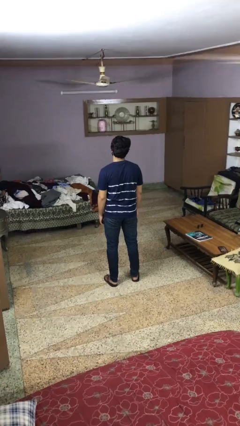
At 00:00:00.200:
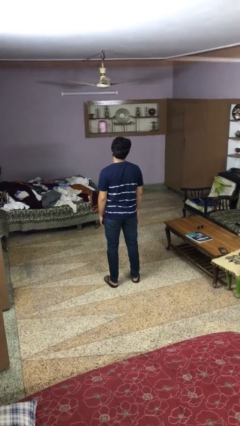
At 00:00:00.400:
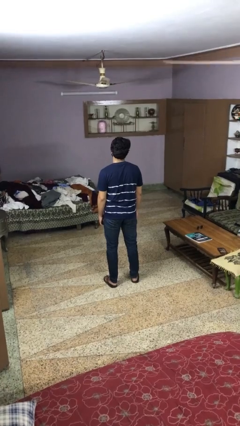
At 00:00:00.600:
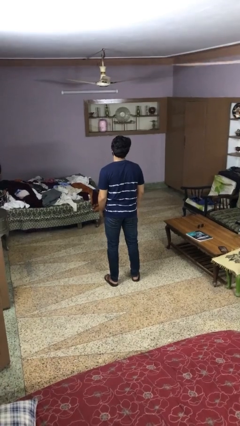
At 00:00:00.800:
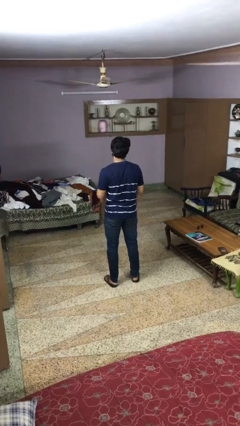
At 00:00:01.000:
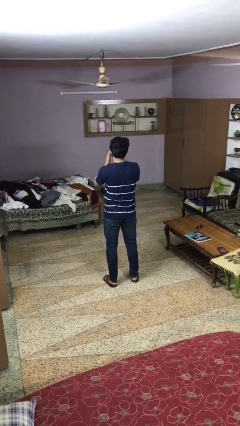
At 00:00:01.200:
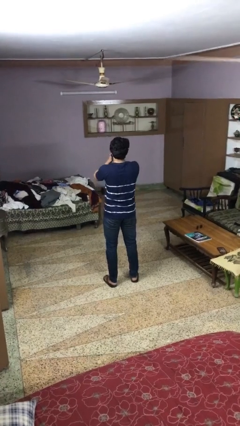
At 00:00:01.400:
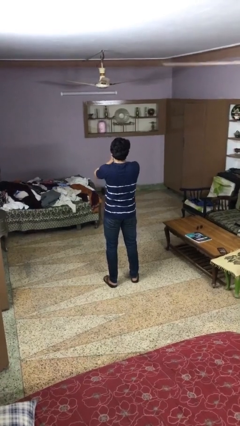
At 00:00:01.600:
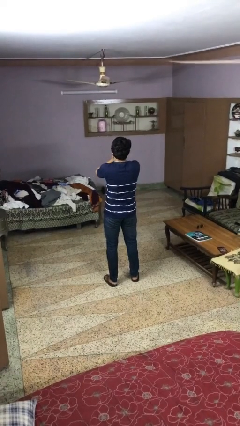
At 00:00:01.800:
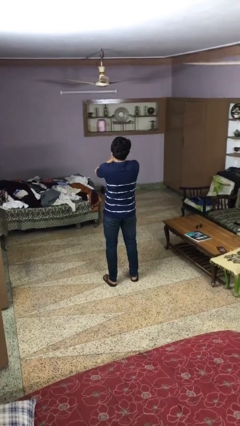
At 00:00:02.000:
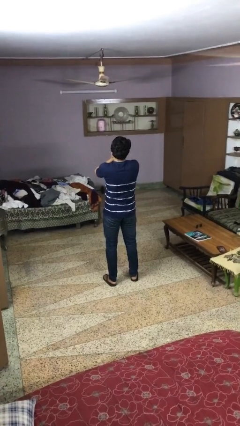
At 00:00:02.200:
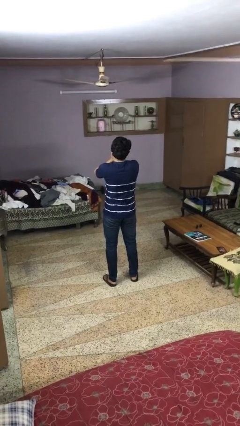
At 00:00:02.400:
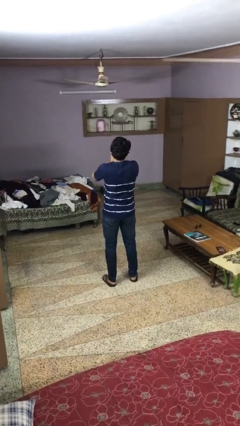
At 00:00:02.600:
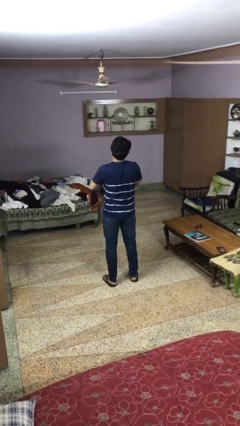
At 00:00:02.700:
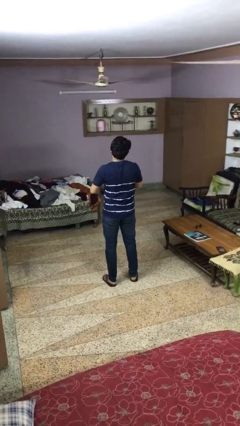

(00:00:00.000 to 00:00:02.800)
person covers face with hands

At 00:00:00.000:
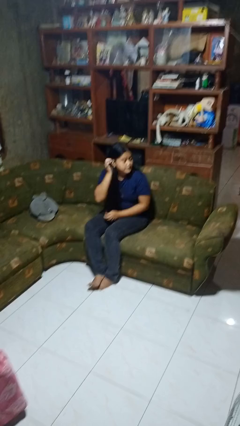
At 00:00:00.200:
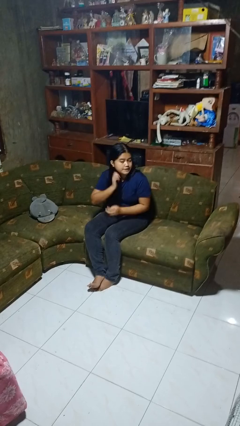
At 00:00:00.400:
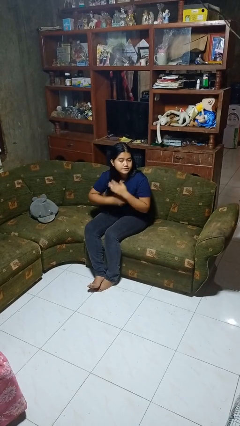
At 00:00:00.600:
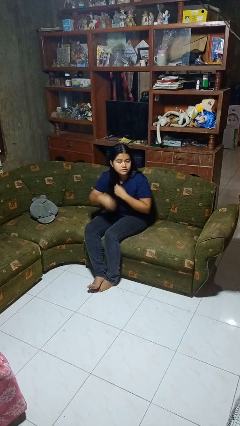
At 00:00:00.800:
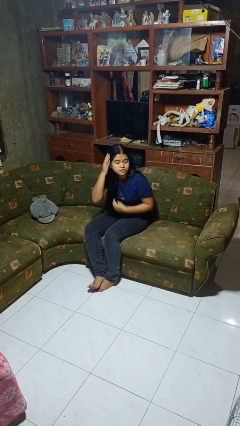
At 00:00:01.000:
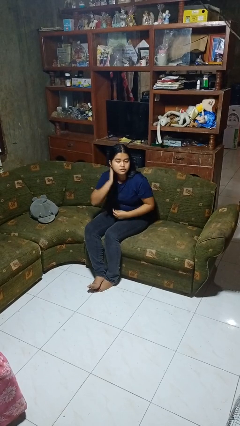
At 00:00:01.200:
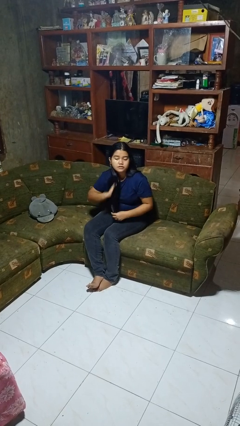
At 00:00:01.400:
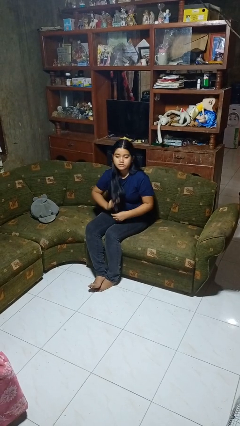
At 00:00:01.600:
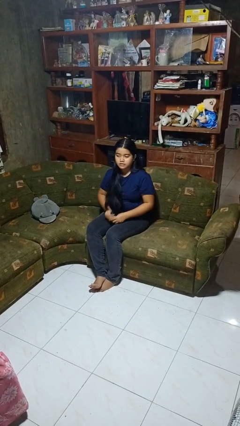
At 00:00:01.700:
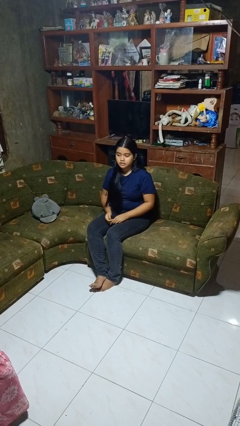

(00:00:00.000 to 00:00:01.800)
person strokes hair

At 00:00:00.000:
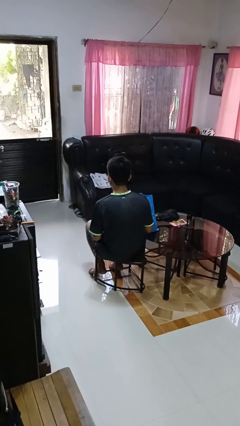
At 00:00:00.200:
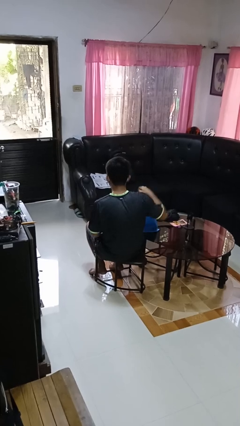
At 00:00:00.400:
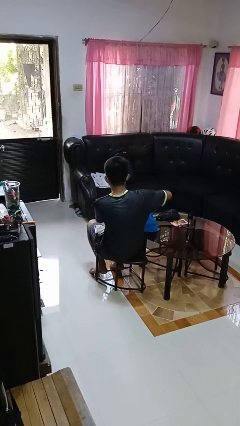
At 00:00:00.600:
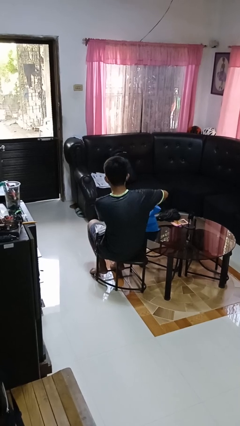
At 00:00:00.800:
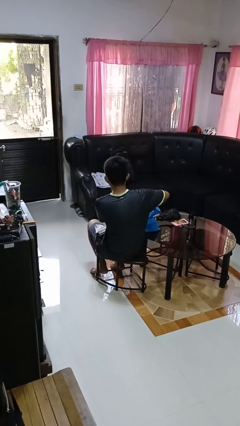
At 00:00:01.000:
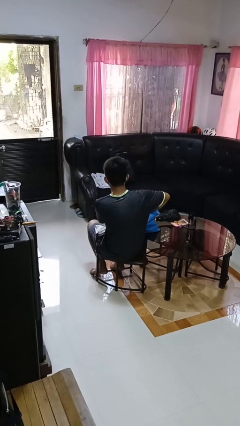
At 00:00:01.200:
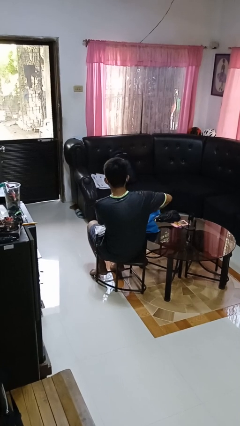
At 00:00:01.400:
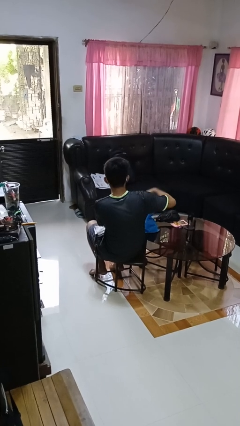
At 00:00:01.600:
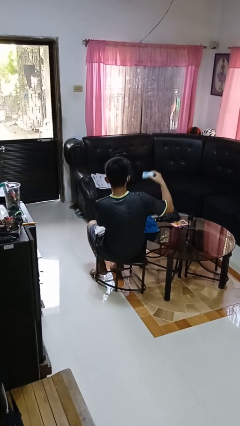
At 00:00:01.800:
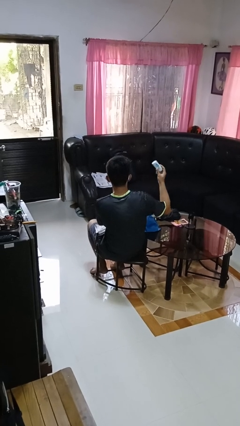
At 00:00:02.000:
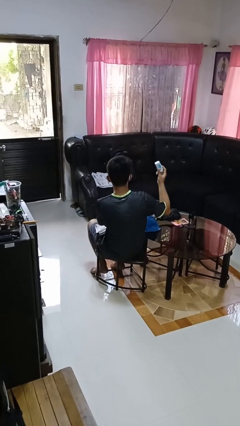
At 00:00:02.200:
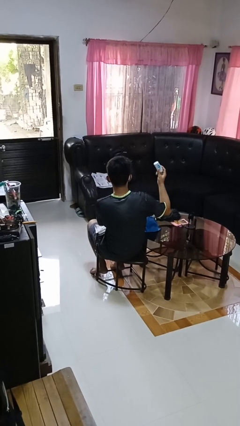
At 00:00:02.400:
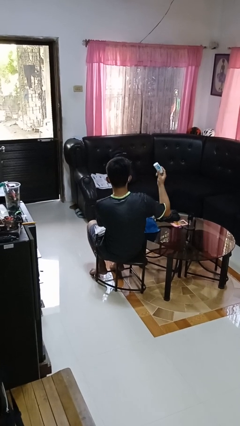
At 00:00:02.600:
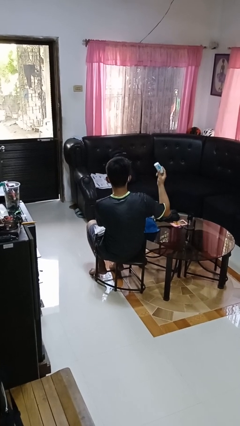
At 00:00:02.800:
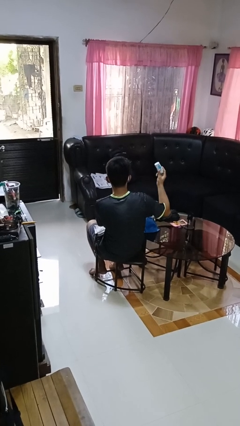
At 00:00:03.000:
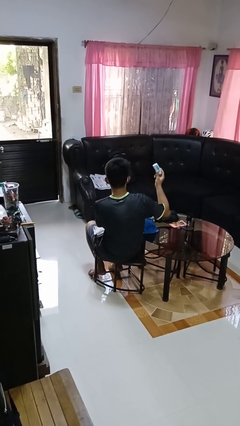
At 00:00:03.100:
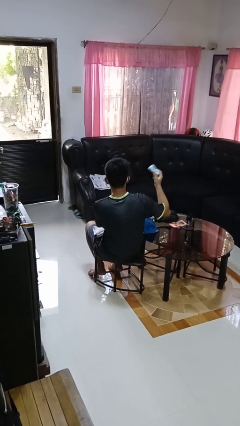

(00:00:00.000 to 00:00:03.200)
person takes object from bag

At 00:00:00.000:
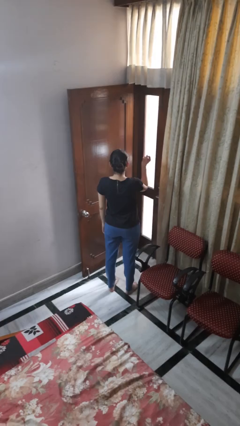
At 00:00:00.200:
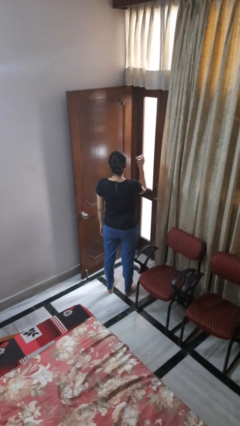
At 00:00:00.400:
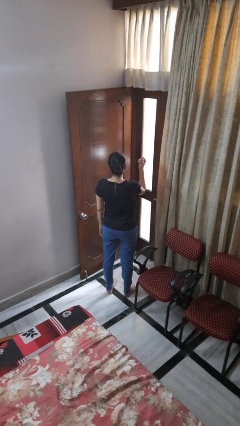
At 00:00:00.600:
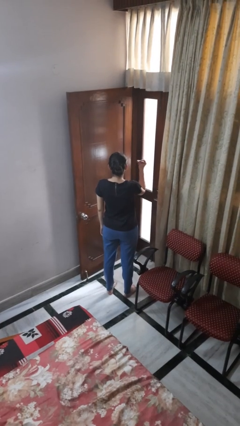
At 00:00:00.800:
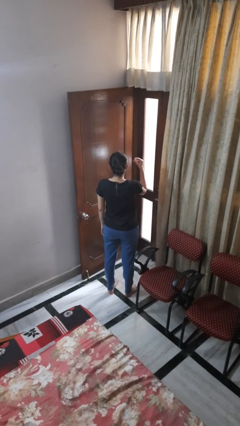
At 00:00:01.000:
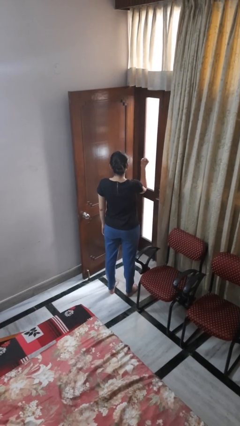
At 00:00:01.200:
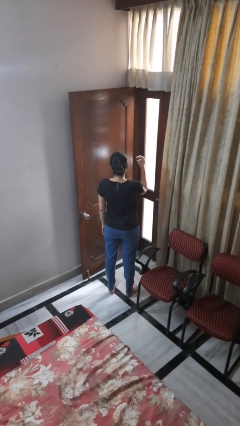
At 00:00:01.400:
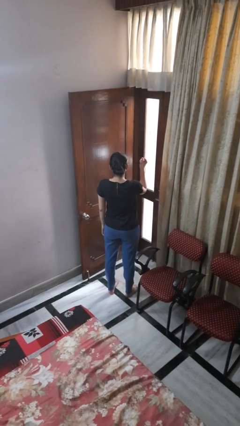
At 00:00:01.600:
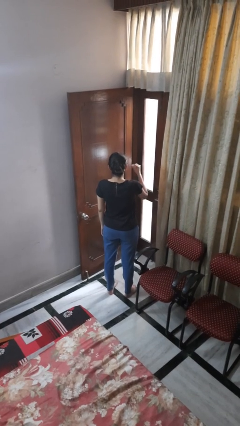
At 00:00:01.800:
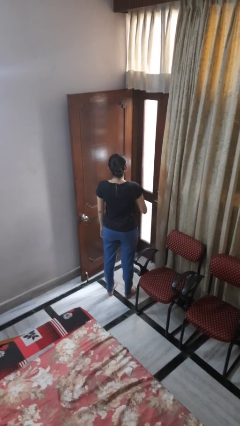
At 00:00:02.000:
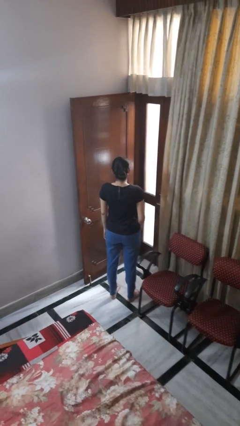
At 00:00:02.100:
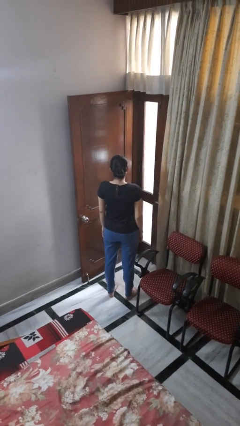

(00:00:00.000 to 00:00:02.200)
person snaps fingers

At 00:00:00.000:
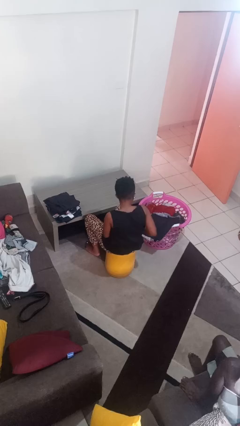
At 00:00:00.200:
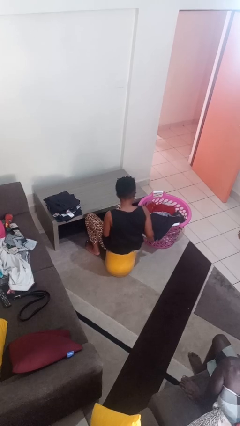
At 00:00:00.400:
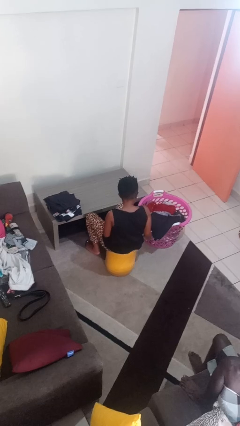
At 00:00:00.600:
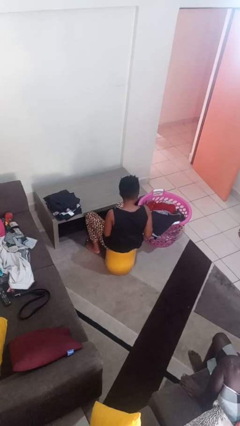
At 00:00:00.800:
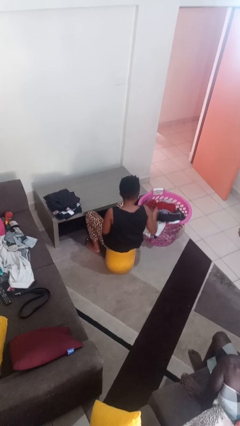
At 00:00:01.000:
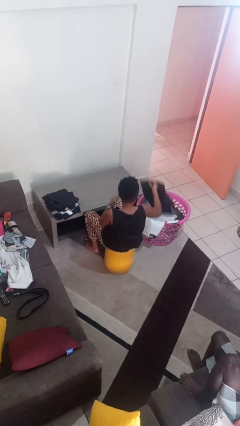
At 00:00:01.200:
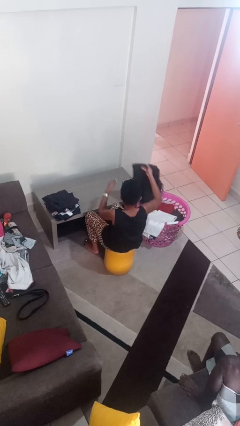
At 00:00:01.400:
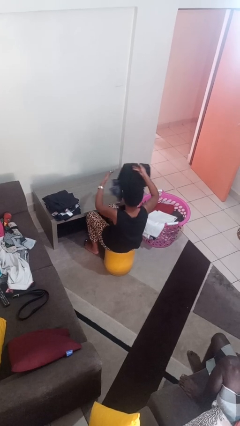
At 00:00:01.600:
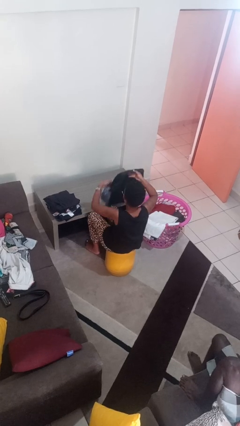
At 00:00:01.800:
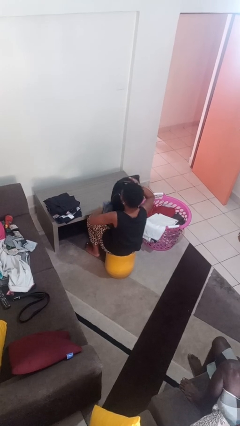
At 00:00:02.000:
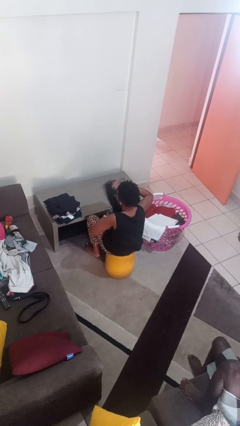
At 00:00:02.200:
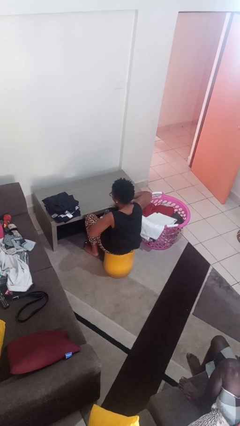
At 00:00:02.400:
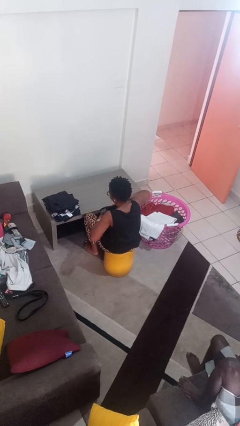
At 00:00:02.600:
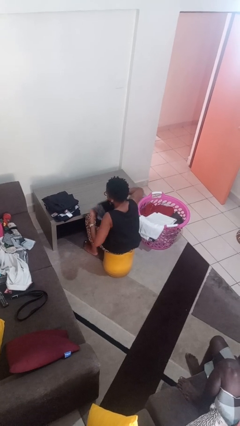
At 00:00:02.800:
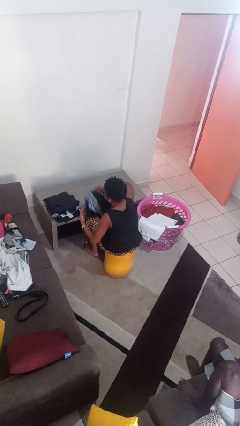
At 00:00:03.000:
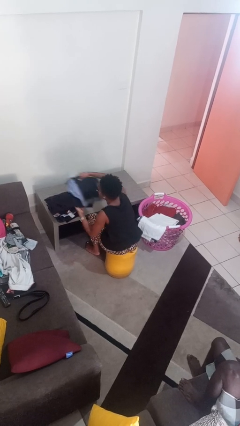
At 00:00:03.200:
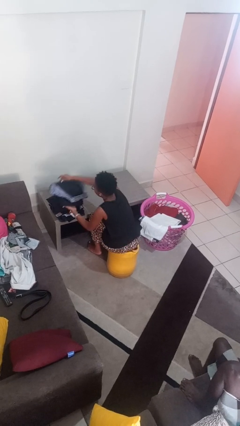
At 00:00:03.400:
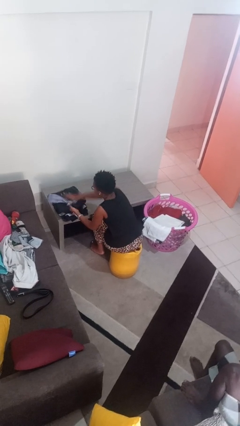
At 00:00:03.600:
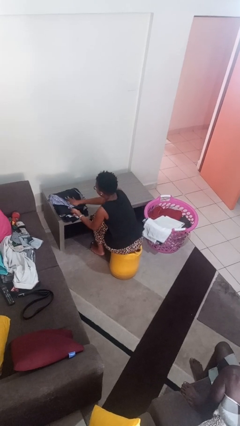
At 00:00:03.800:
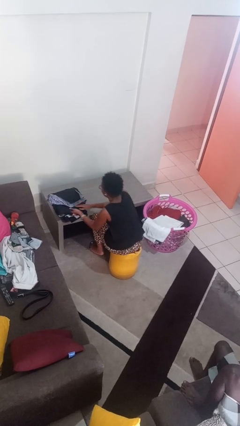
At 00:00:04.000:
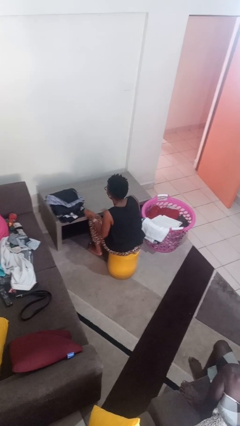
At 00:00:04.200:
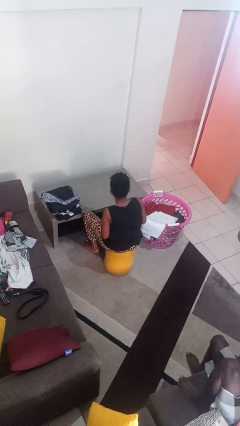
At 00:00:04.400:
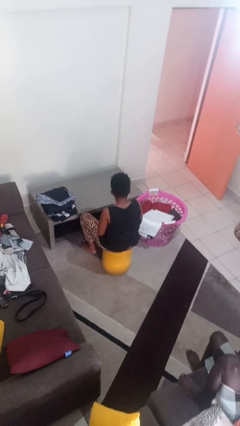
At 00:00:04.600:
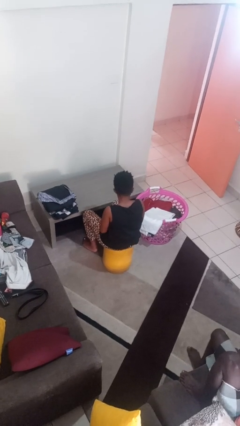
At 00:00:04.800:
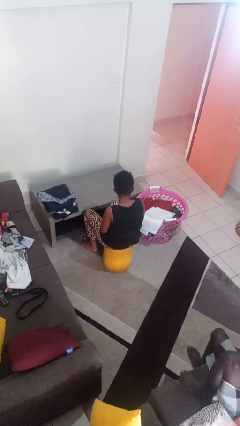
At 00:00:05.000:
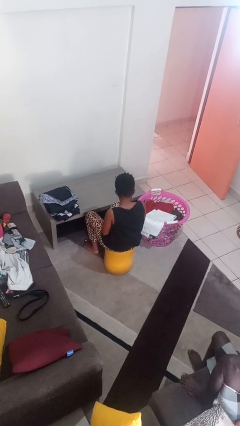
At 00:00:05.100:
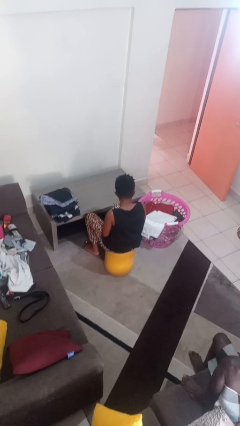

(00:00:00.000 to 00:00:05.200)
person folds pants

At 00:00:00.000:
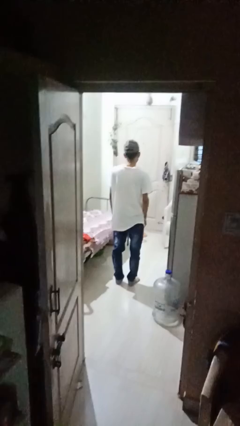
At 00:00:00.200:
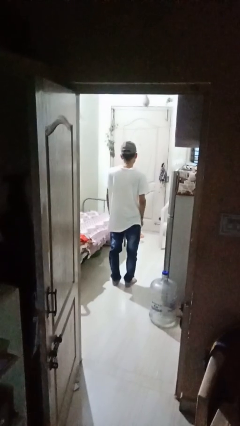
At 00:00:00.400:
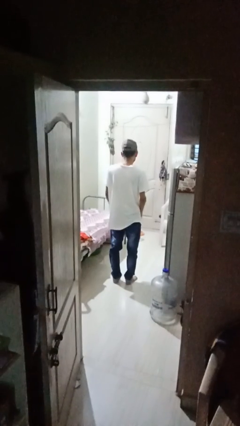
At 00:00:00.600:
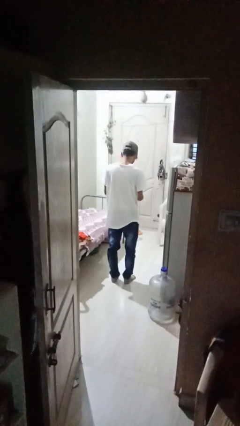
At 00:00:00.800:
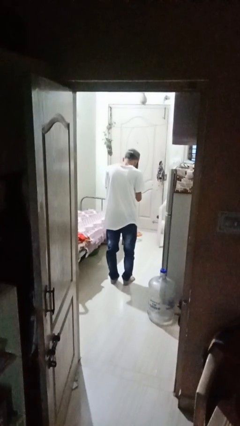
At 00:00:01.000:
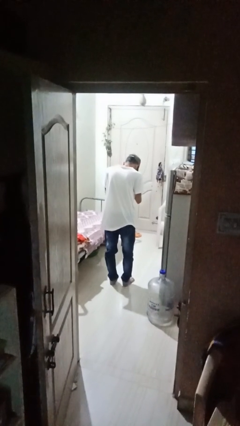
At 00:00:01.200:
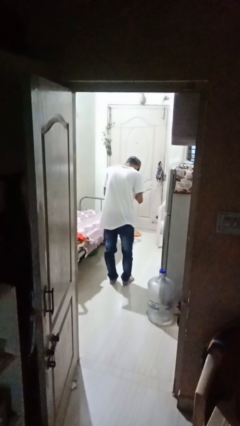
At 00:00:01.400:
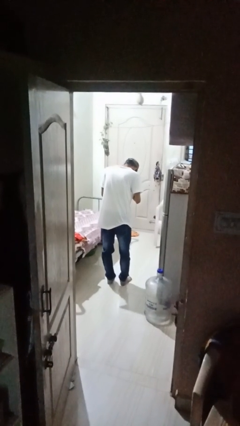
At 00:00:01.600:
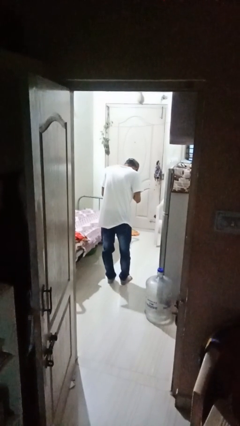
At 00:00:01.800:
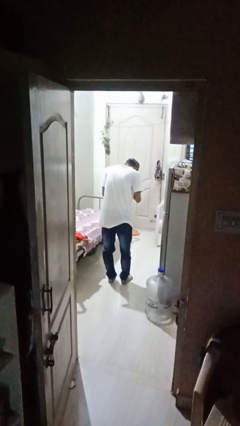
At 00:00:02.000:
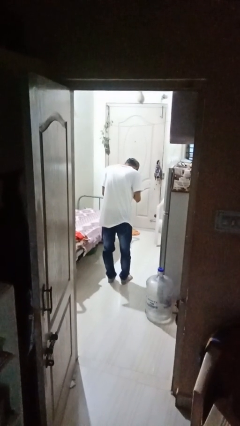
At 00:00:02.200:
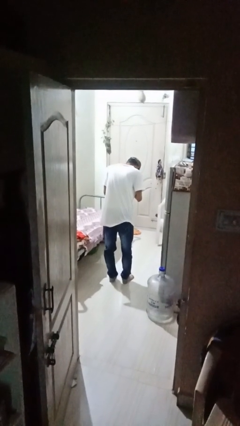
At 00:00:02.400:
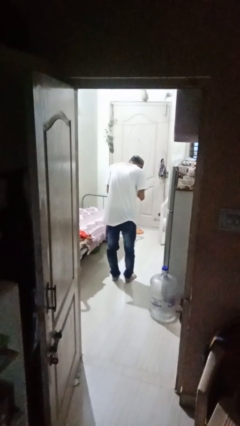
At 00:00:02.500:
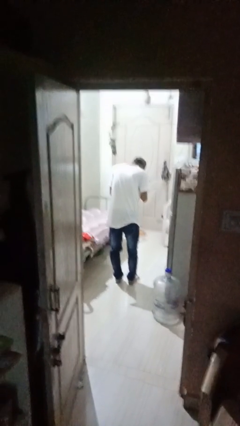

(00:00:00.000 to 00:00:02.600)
person prays
